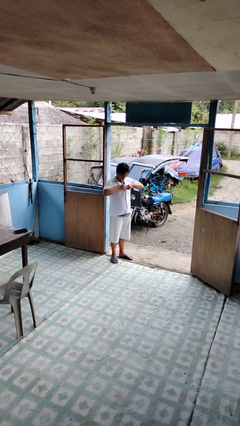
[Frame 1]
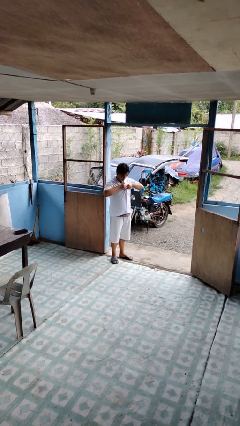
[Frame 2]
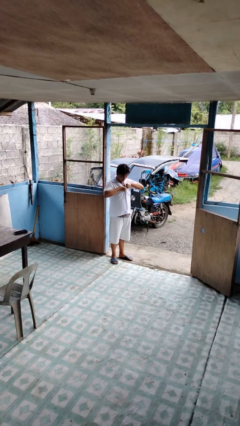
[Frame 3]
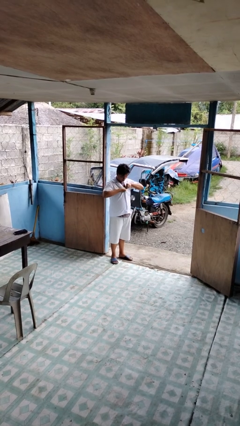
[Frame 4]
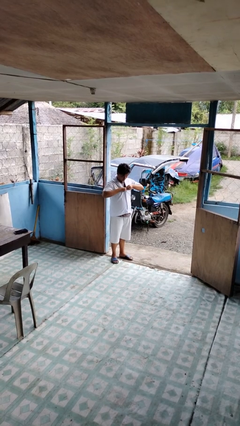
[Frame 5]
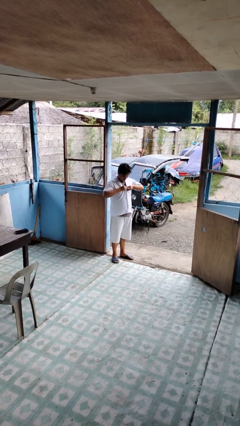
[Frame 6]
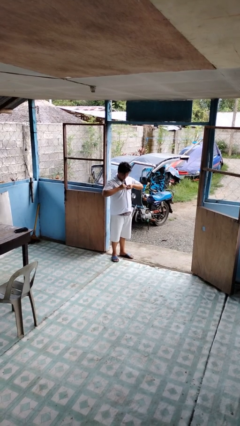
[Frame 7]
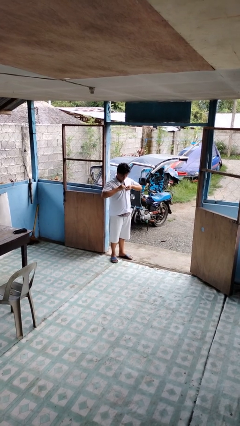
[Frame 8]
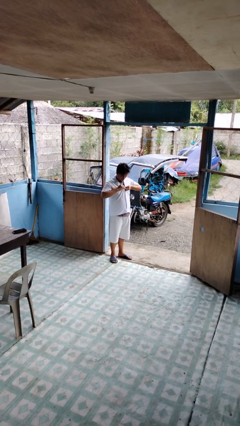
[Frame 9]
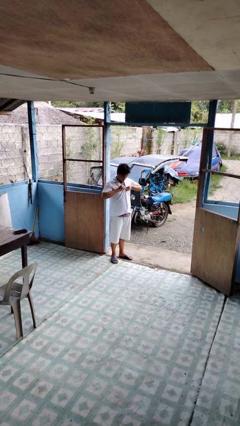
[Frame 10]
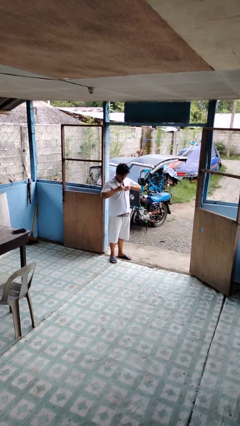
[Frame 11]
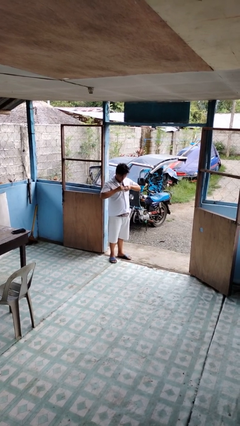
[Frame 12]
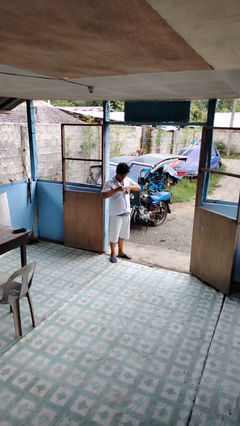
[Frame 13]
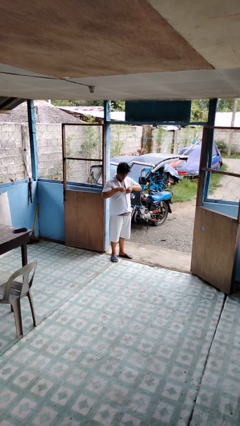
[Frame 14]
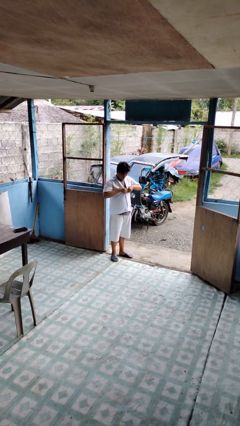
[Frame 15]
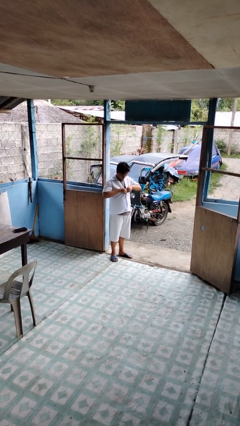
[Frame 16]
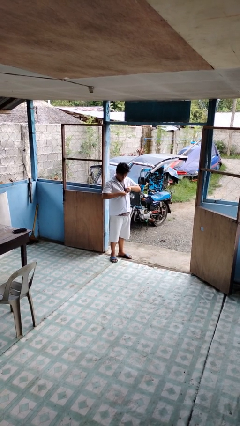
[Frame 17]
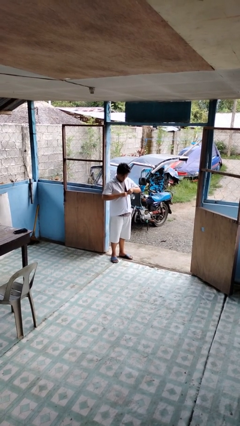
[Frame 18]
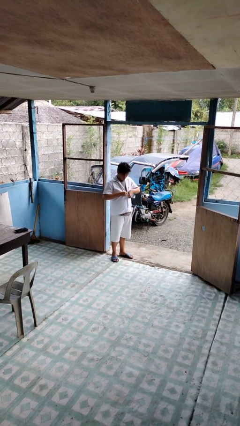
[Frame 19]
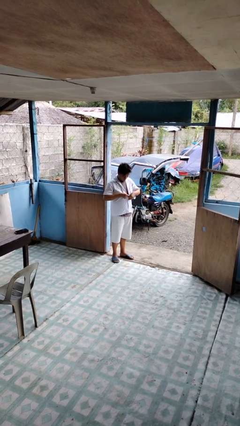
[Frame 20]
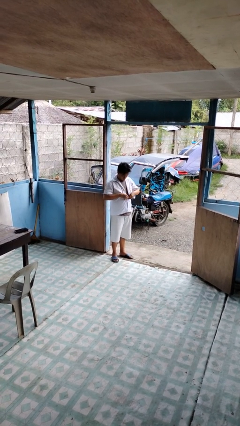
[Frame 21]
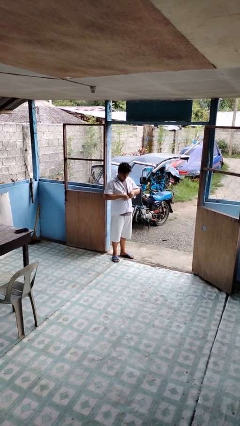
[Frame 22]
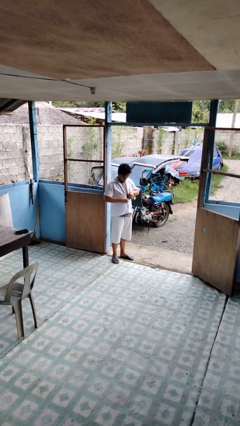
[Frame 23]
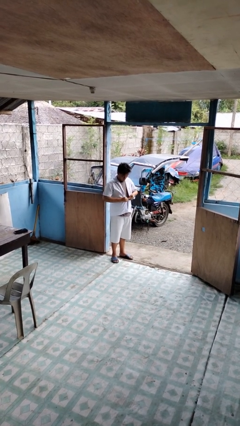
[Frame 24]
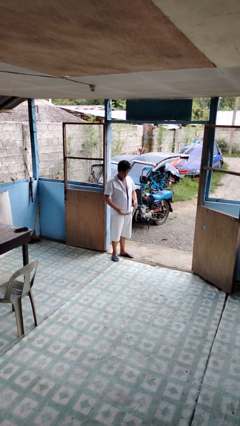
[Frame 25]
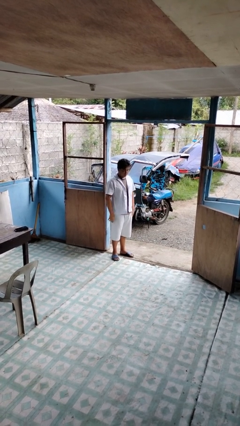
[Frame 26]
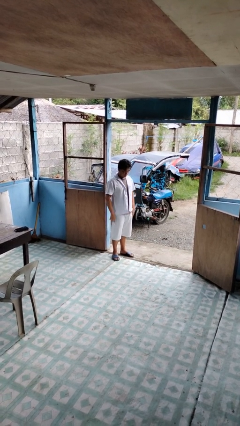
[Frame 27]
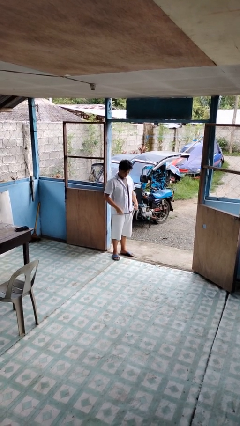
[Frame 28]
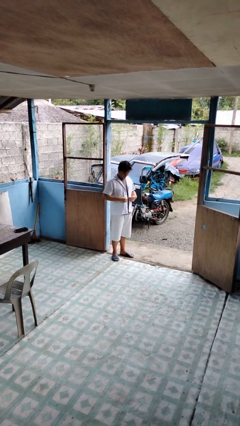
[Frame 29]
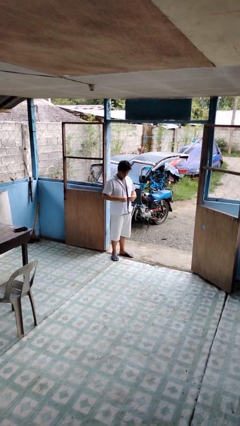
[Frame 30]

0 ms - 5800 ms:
person unbuttons shirt

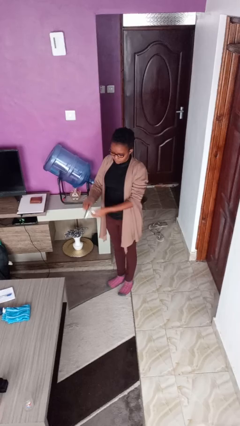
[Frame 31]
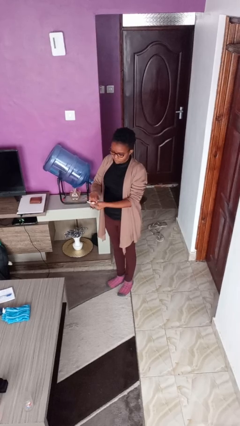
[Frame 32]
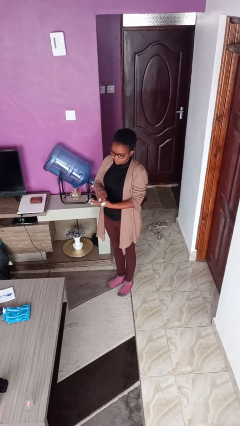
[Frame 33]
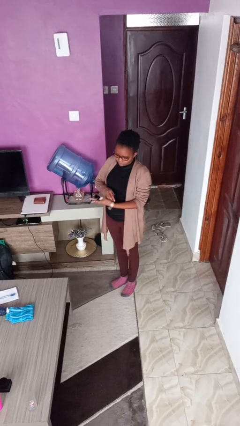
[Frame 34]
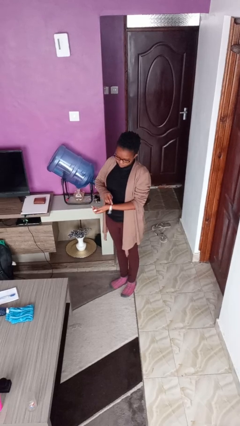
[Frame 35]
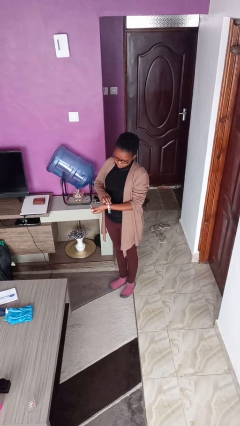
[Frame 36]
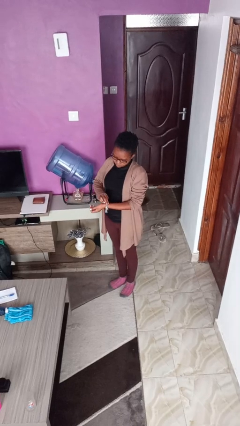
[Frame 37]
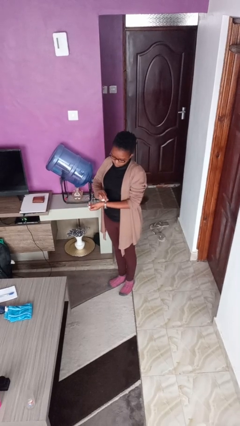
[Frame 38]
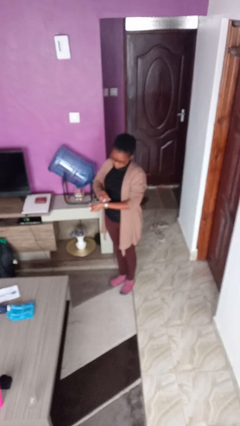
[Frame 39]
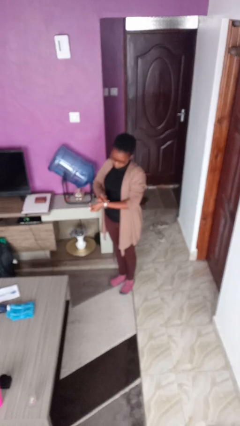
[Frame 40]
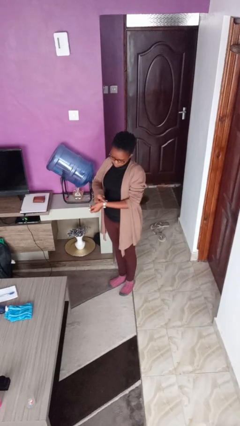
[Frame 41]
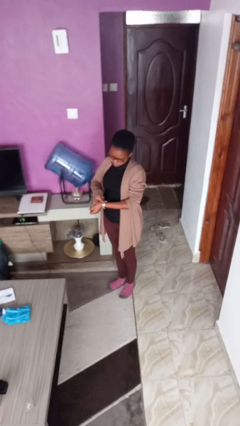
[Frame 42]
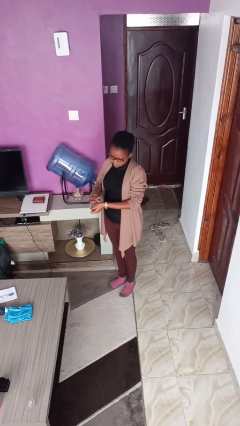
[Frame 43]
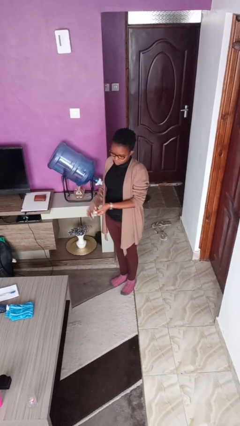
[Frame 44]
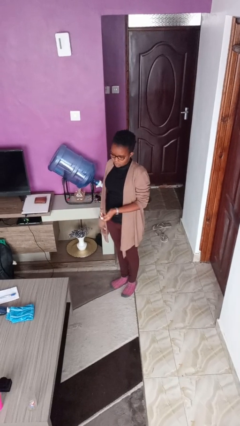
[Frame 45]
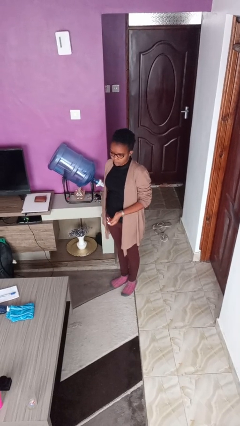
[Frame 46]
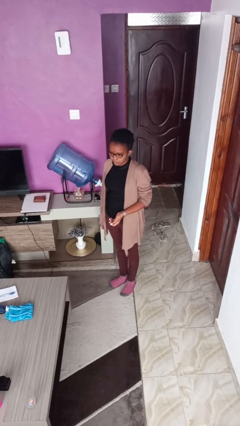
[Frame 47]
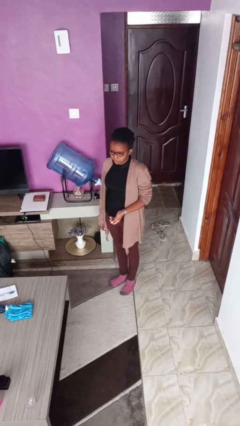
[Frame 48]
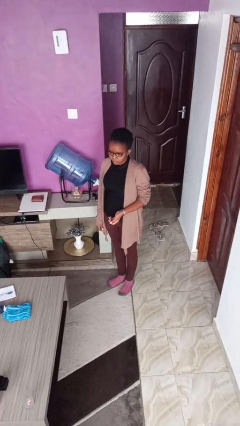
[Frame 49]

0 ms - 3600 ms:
person puts on wristwatch

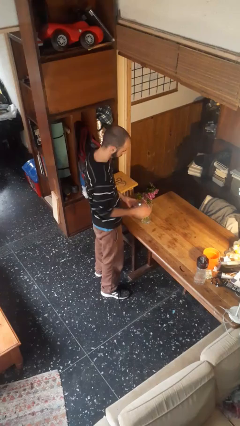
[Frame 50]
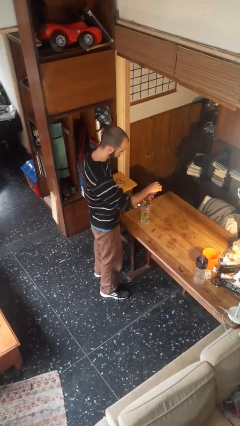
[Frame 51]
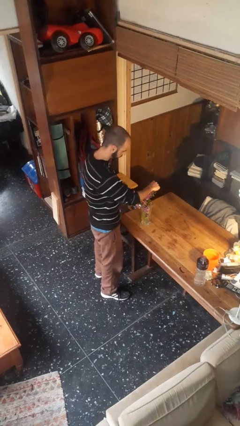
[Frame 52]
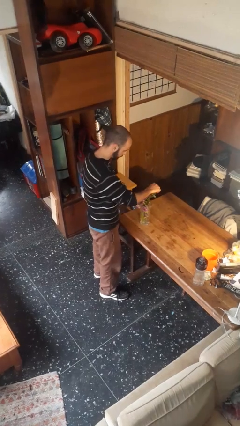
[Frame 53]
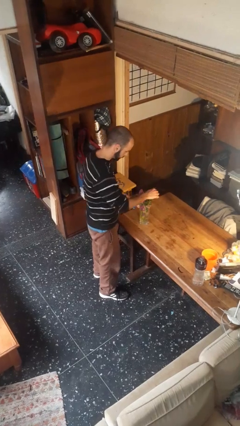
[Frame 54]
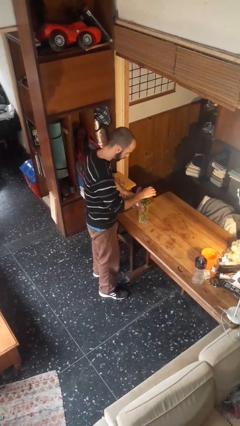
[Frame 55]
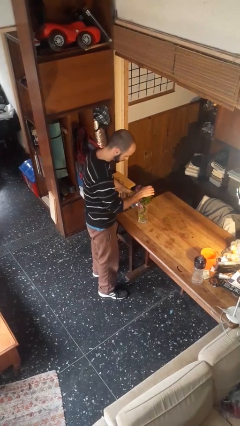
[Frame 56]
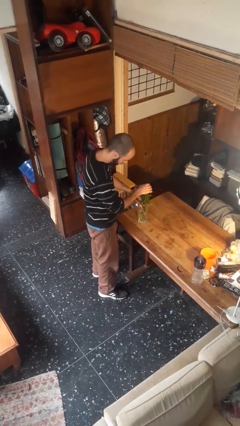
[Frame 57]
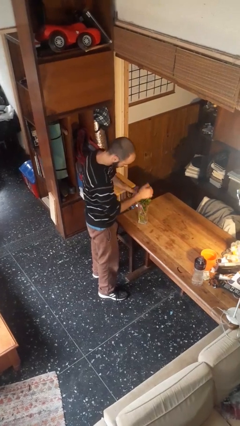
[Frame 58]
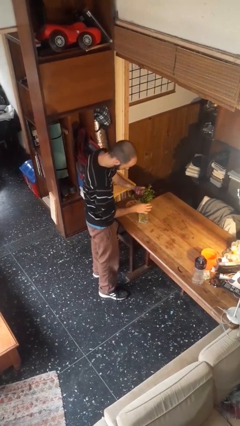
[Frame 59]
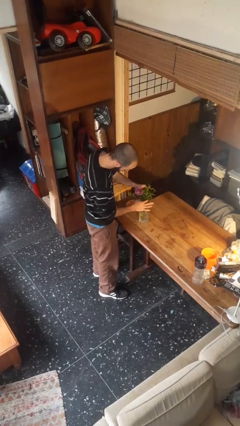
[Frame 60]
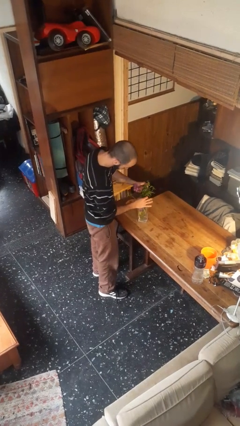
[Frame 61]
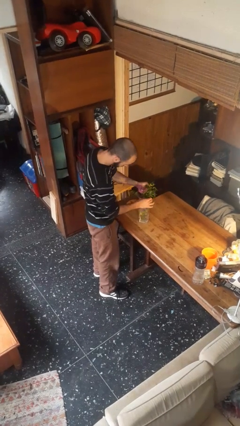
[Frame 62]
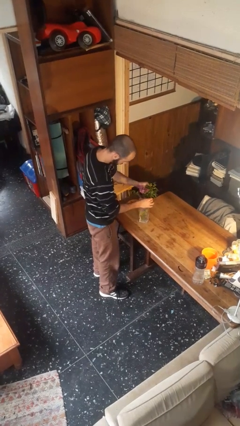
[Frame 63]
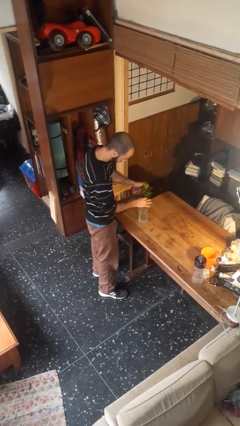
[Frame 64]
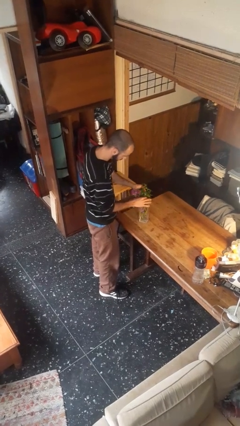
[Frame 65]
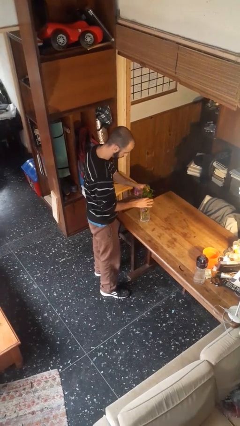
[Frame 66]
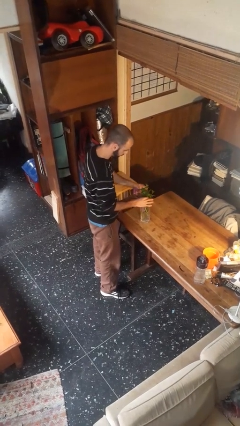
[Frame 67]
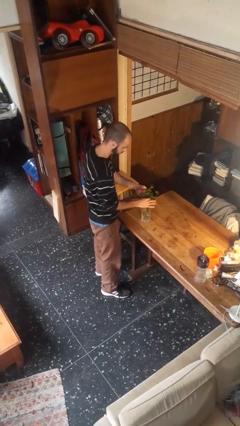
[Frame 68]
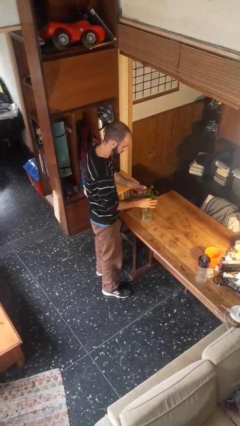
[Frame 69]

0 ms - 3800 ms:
person arranges flowers in vase

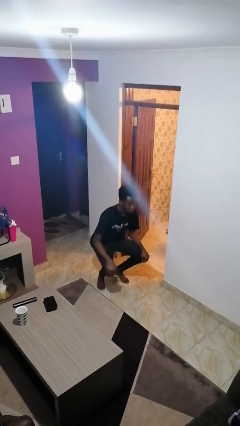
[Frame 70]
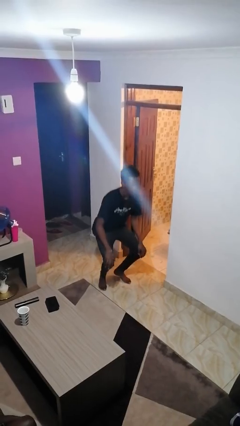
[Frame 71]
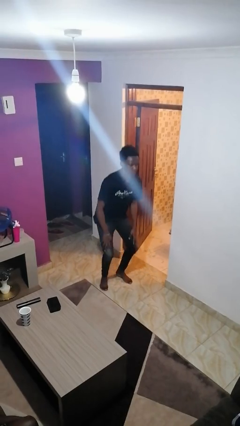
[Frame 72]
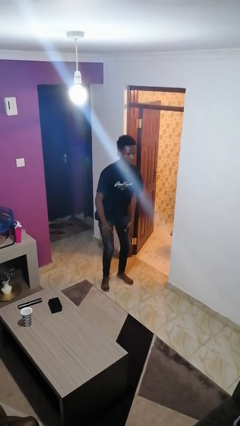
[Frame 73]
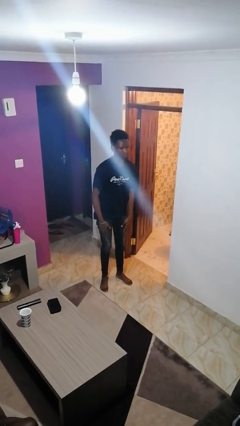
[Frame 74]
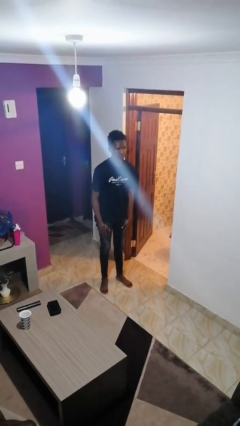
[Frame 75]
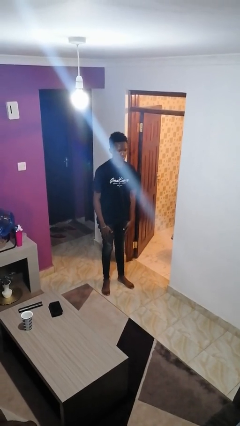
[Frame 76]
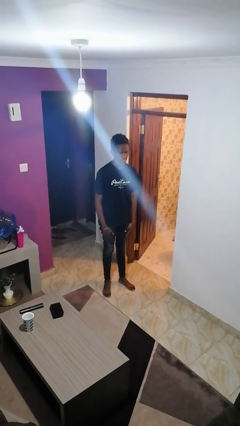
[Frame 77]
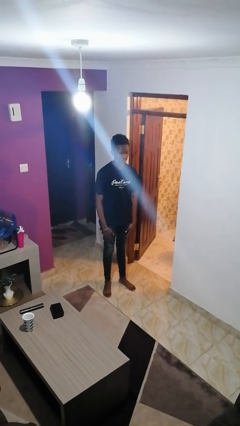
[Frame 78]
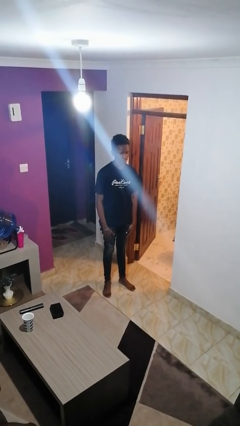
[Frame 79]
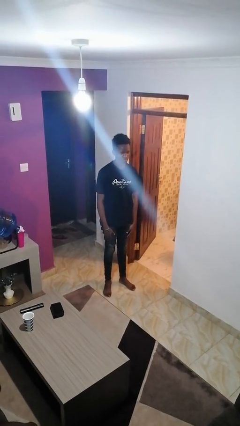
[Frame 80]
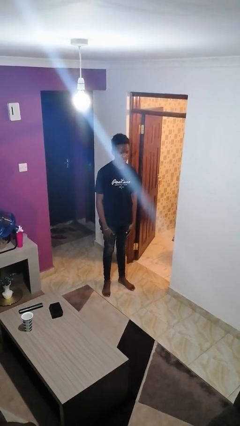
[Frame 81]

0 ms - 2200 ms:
person stands up

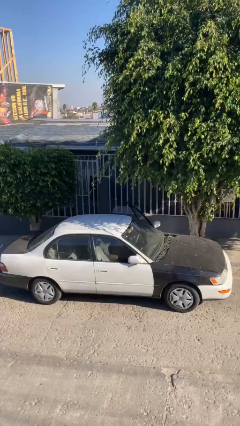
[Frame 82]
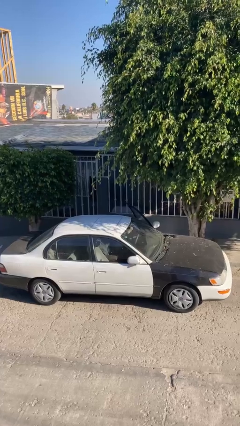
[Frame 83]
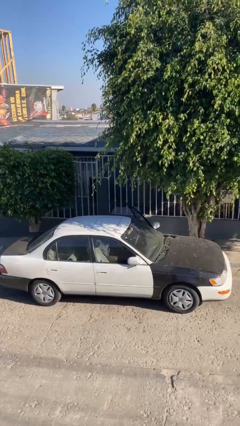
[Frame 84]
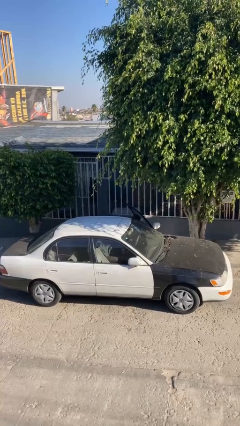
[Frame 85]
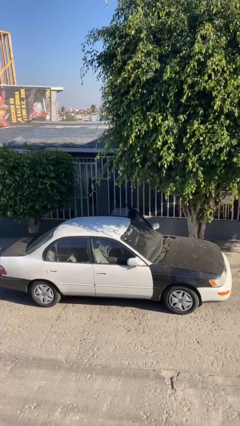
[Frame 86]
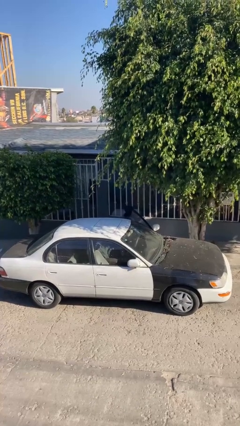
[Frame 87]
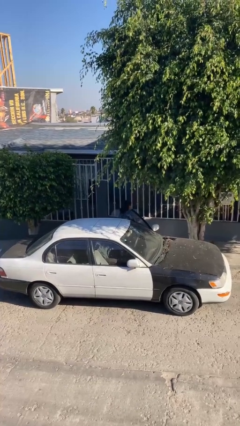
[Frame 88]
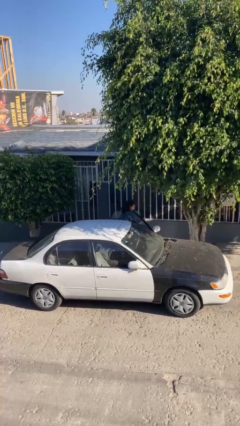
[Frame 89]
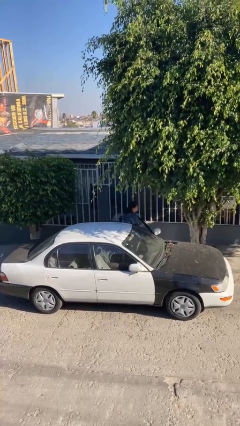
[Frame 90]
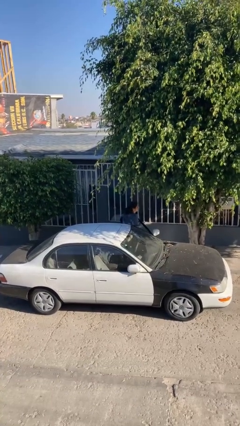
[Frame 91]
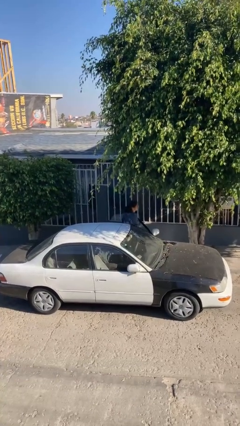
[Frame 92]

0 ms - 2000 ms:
person exits car
